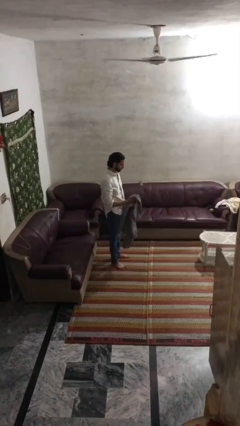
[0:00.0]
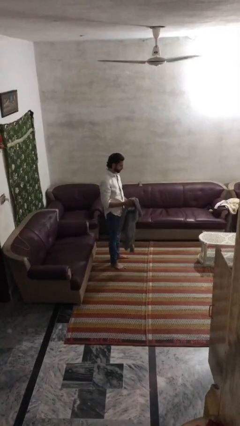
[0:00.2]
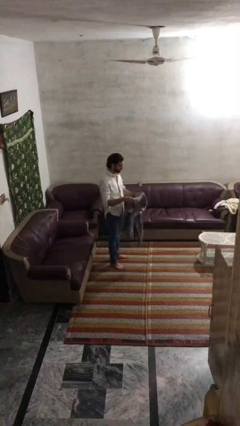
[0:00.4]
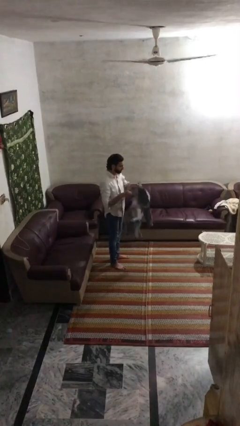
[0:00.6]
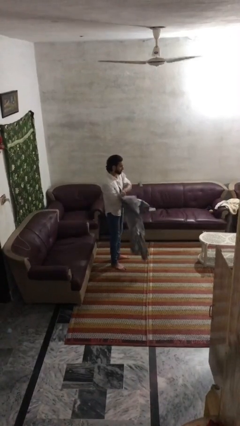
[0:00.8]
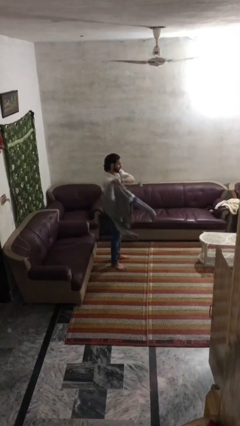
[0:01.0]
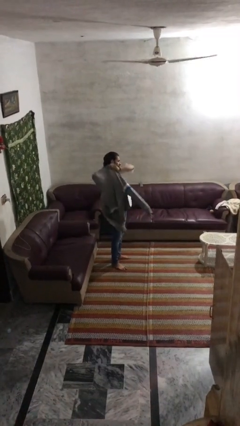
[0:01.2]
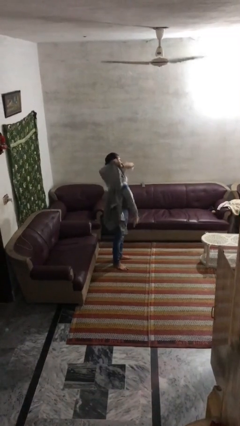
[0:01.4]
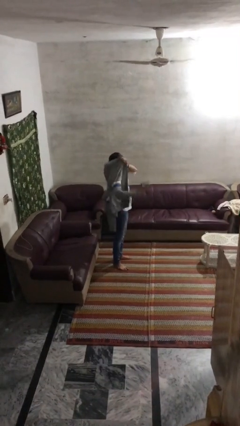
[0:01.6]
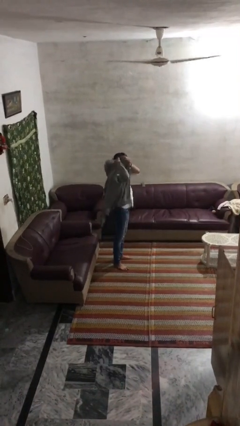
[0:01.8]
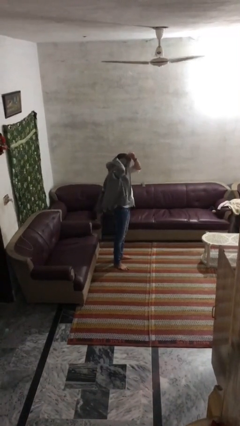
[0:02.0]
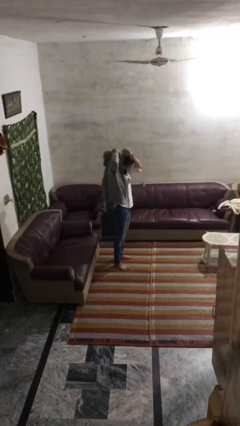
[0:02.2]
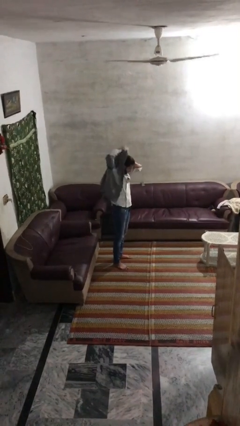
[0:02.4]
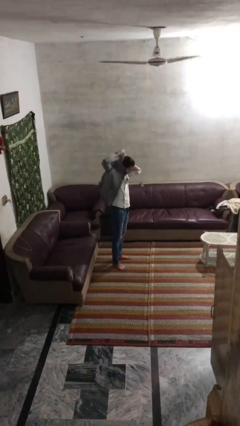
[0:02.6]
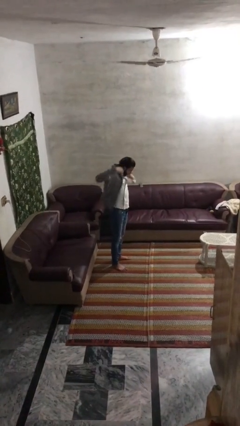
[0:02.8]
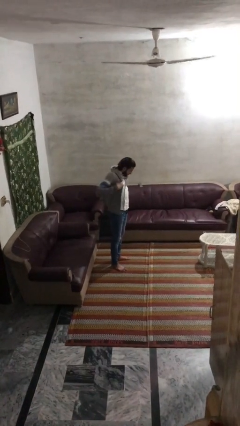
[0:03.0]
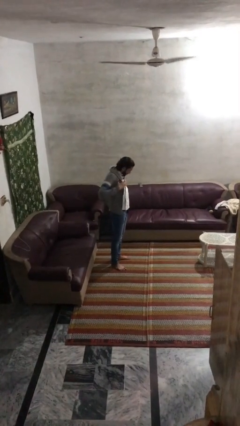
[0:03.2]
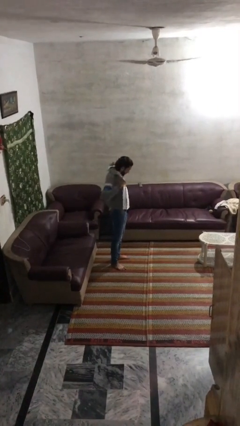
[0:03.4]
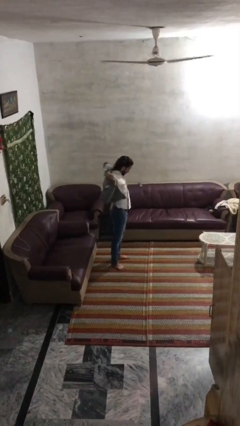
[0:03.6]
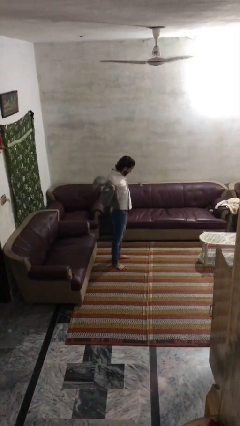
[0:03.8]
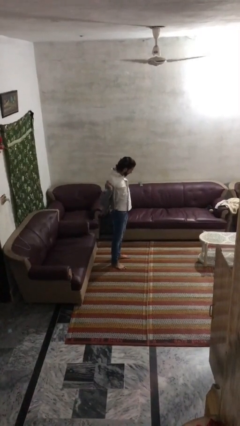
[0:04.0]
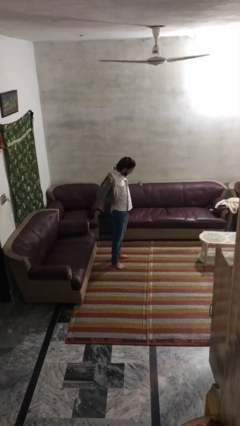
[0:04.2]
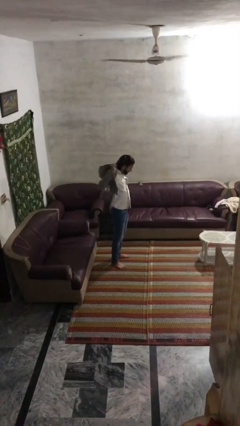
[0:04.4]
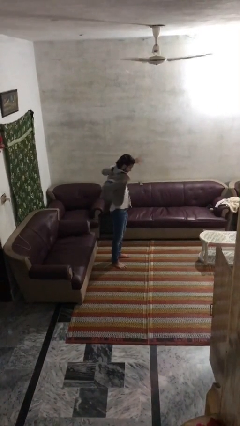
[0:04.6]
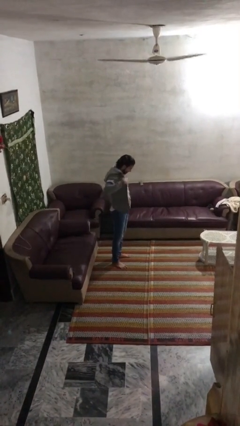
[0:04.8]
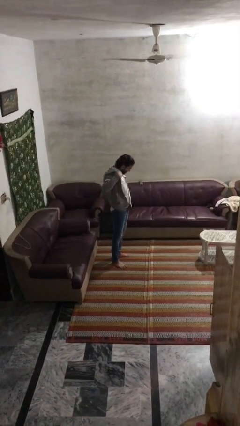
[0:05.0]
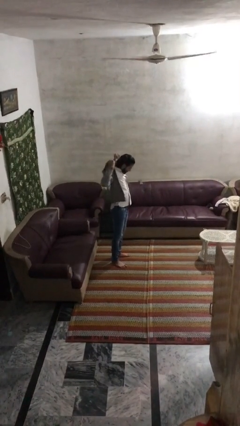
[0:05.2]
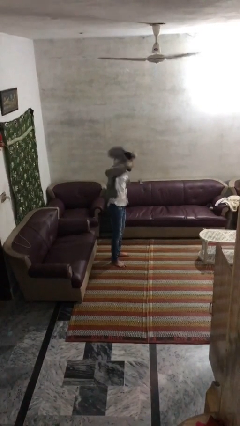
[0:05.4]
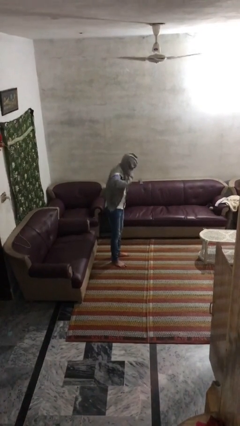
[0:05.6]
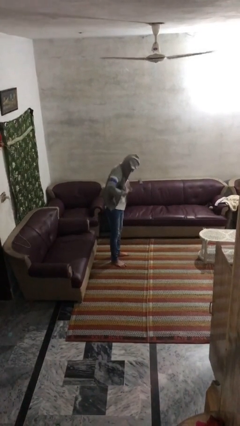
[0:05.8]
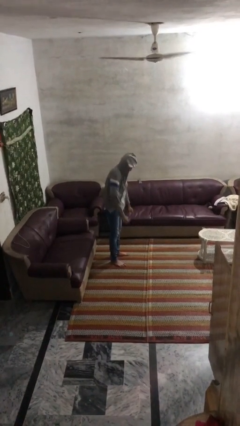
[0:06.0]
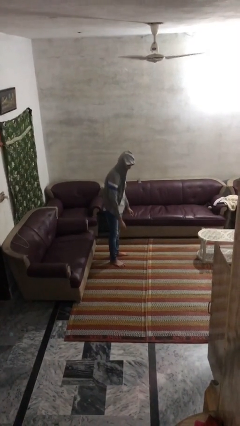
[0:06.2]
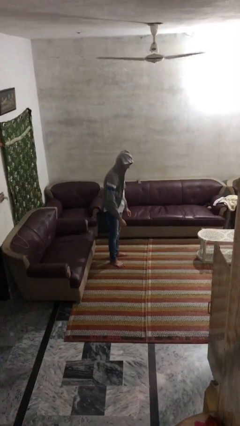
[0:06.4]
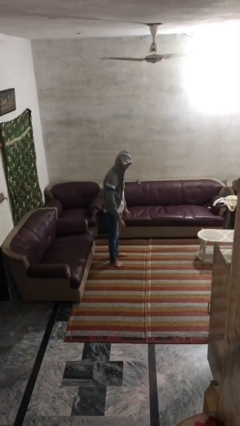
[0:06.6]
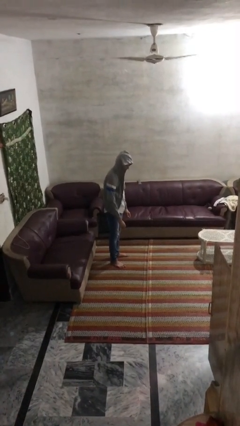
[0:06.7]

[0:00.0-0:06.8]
person puts on hoodie

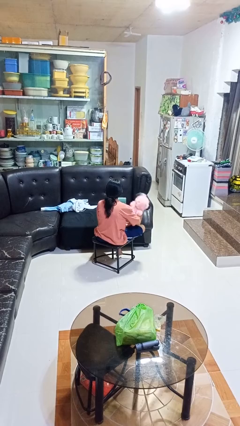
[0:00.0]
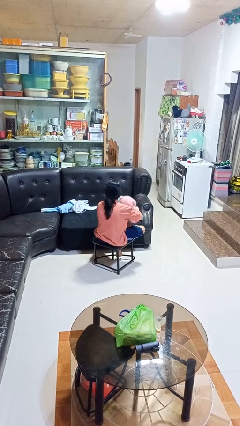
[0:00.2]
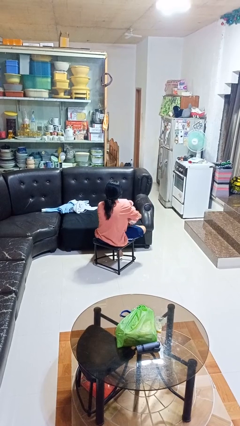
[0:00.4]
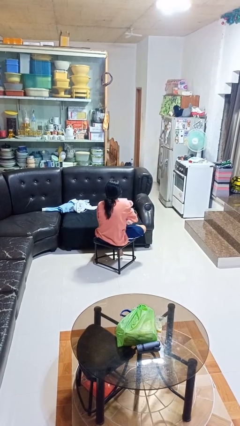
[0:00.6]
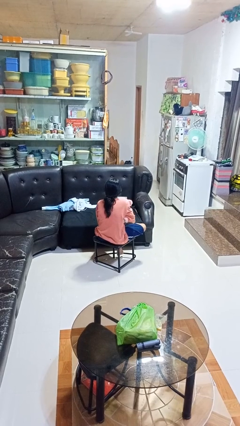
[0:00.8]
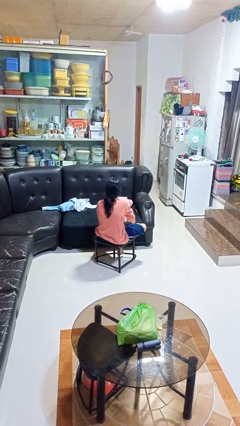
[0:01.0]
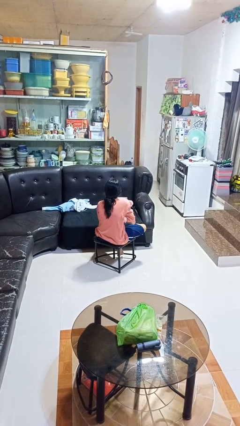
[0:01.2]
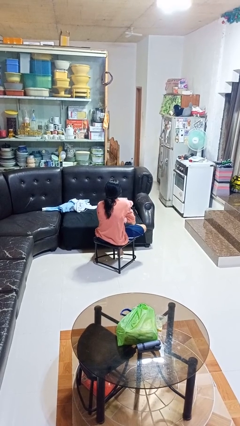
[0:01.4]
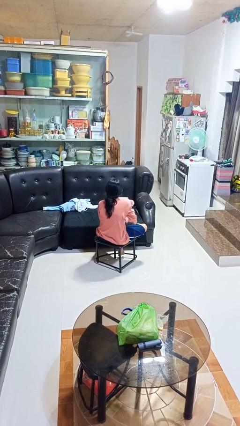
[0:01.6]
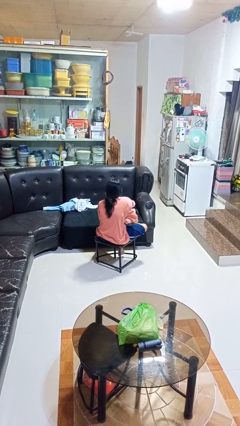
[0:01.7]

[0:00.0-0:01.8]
person hugs stuffed animal

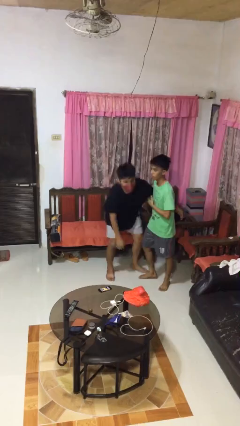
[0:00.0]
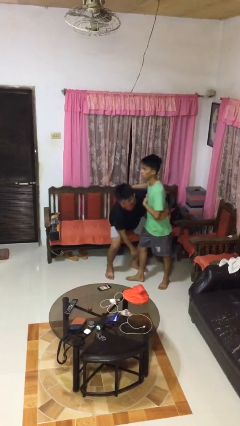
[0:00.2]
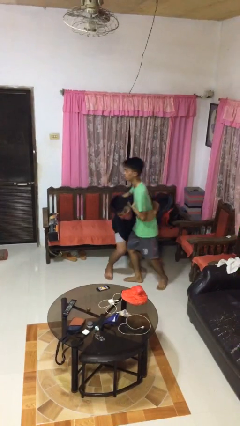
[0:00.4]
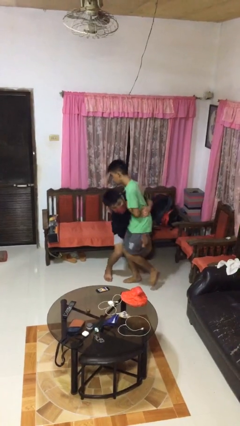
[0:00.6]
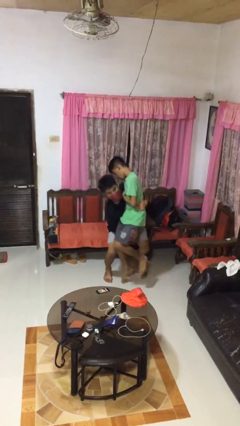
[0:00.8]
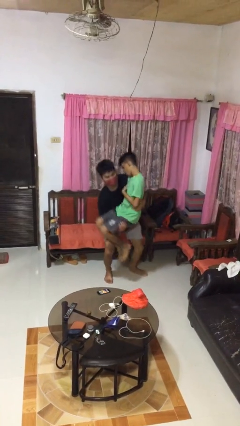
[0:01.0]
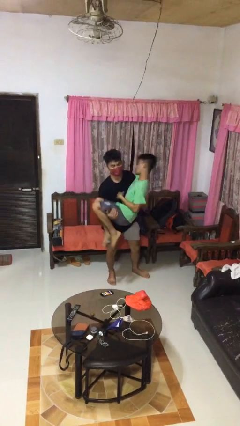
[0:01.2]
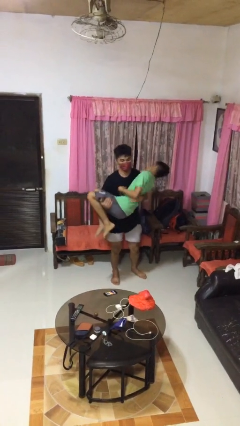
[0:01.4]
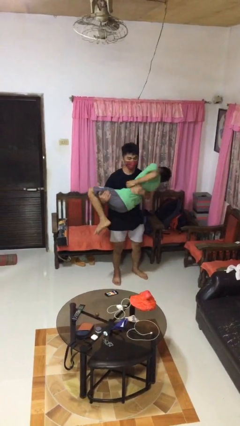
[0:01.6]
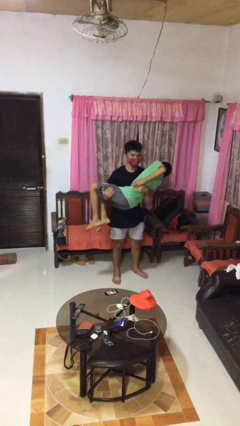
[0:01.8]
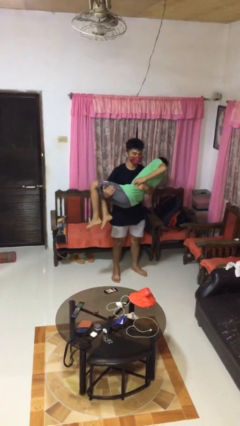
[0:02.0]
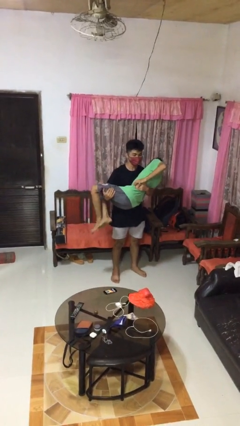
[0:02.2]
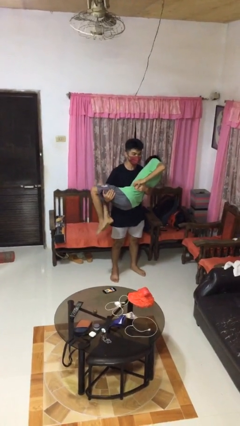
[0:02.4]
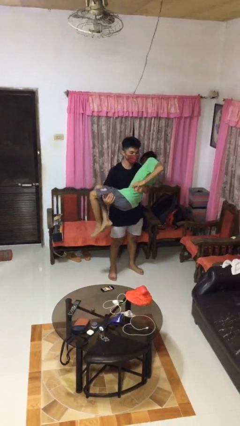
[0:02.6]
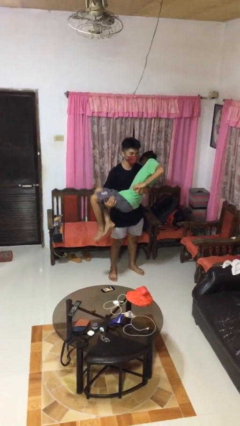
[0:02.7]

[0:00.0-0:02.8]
person picks up person

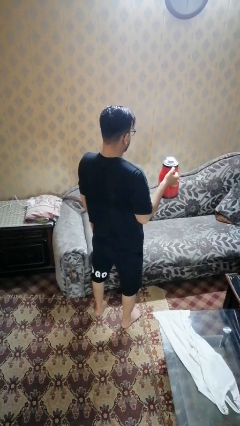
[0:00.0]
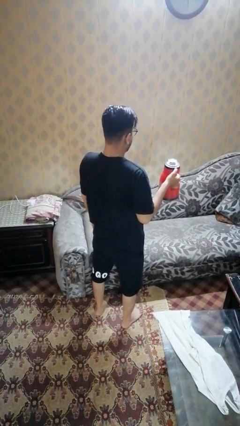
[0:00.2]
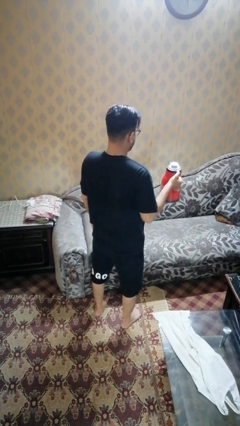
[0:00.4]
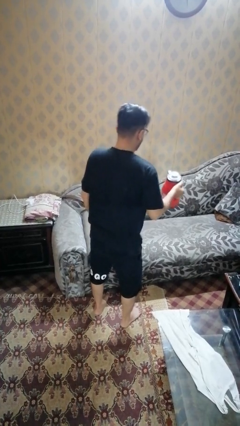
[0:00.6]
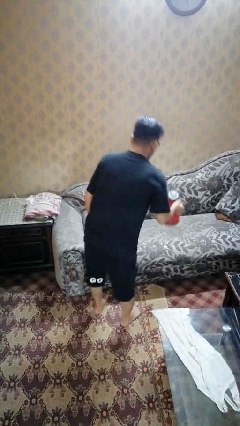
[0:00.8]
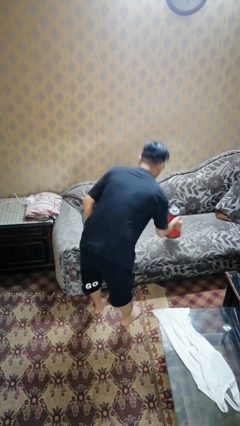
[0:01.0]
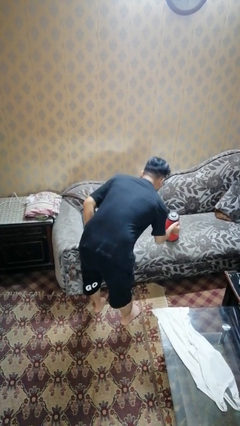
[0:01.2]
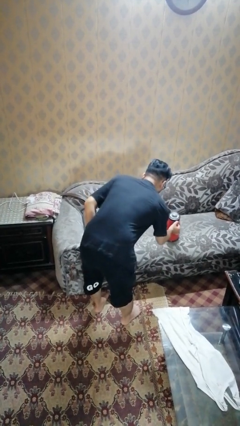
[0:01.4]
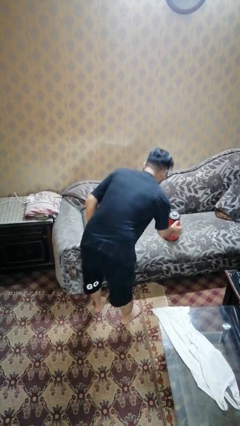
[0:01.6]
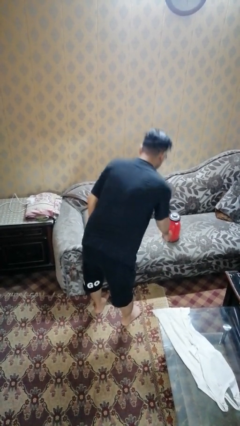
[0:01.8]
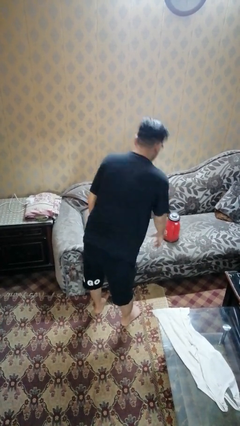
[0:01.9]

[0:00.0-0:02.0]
person puts down object on couch

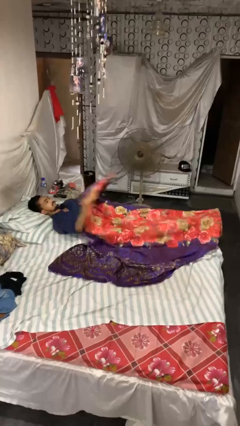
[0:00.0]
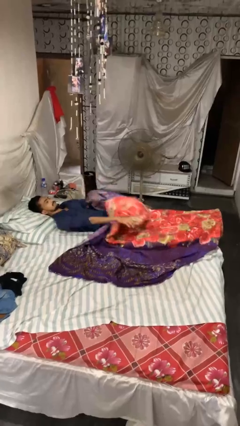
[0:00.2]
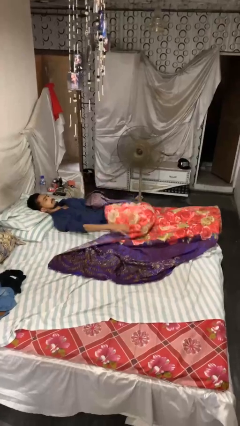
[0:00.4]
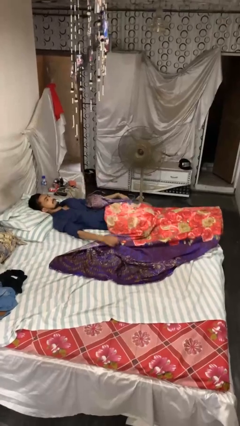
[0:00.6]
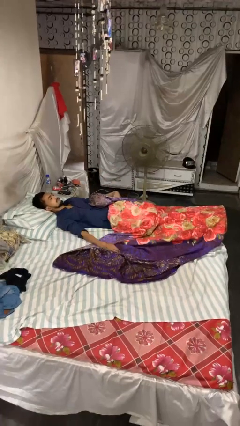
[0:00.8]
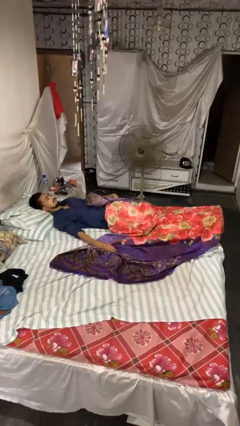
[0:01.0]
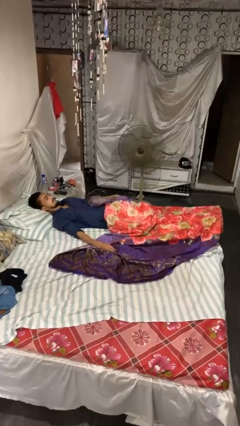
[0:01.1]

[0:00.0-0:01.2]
person uncovers with bedsheets

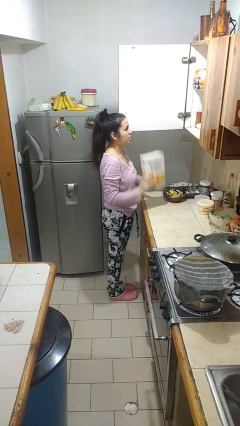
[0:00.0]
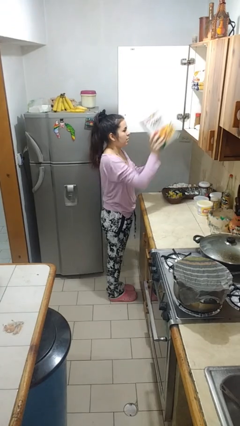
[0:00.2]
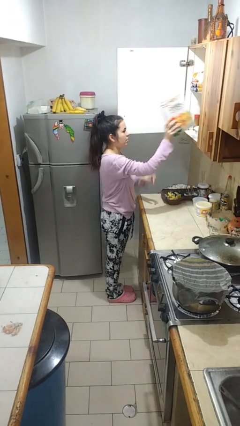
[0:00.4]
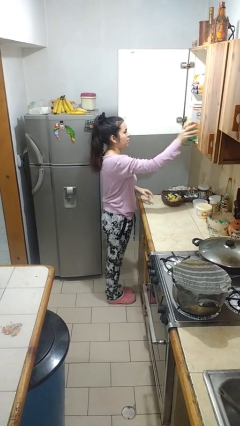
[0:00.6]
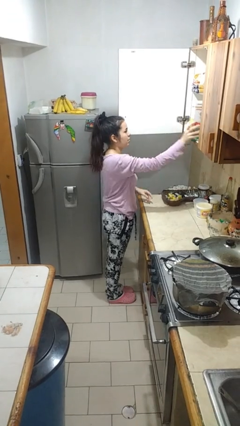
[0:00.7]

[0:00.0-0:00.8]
person puts object in cabinet

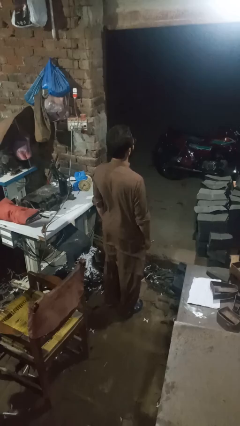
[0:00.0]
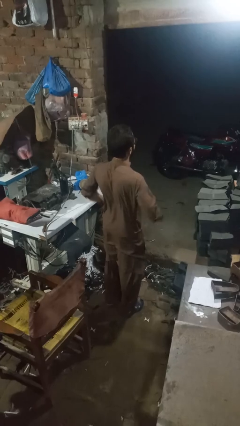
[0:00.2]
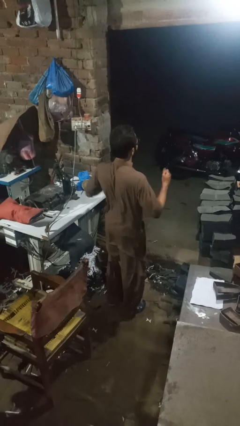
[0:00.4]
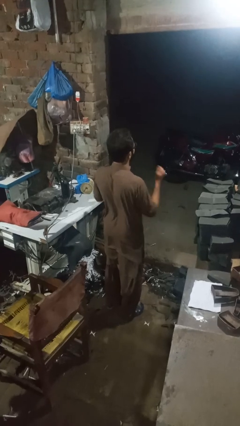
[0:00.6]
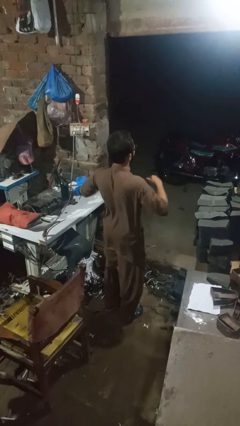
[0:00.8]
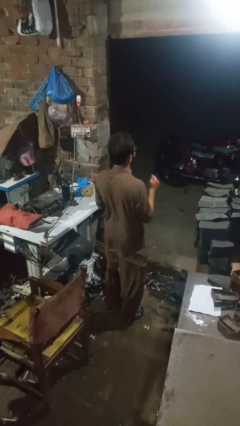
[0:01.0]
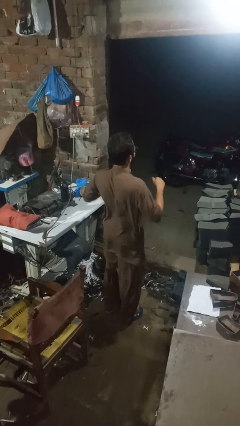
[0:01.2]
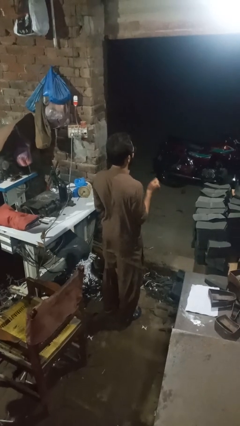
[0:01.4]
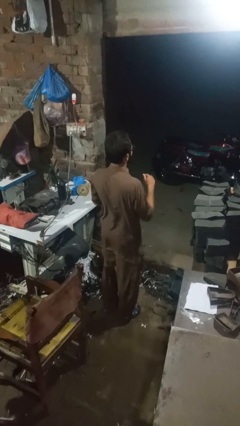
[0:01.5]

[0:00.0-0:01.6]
person dances in place
